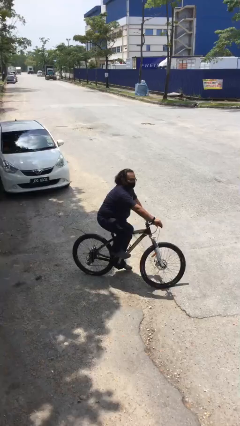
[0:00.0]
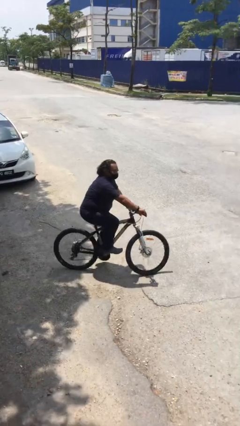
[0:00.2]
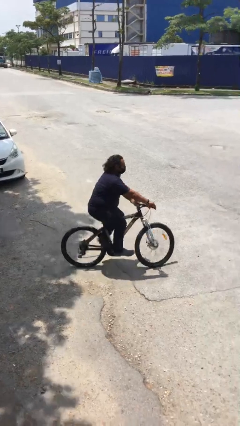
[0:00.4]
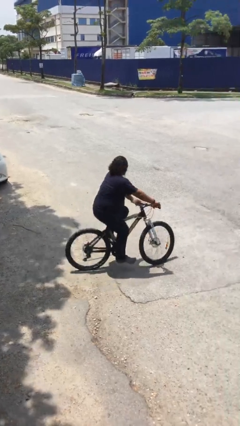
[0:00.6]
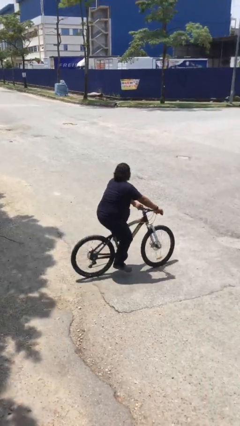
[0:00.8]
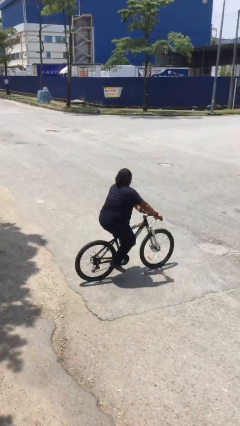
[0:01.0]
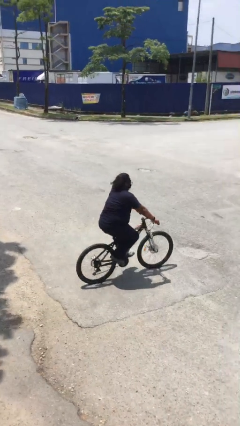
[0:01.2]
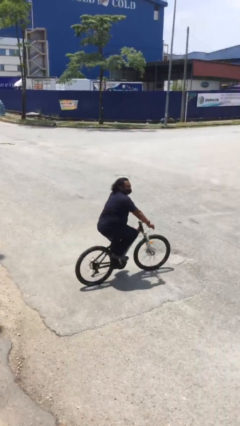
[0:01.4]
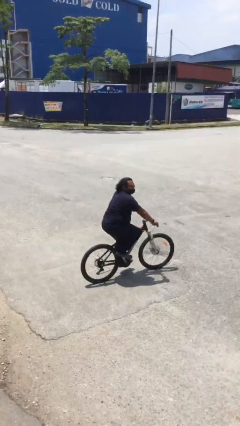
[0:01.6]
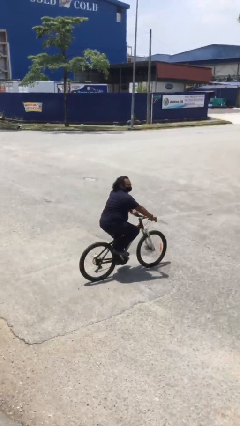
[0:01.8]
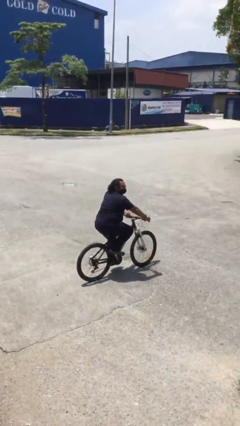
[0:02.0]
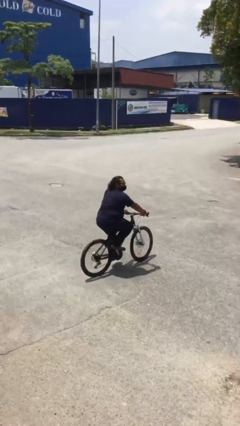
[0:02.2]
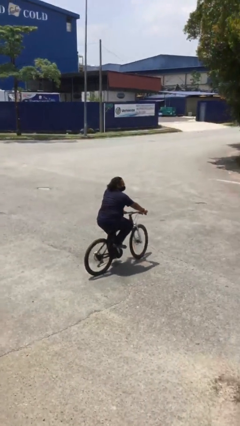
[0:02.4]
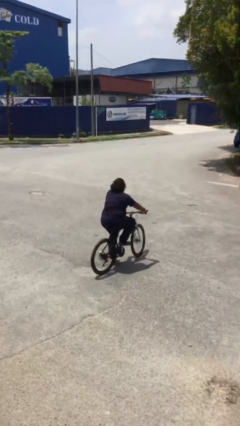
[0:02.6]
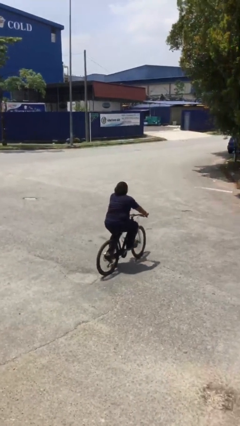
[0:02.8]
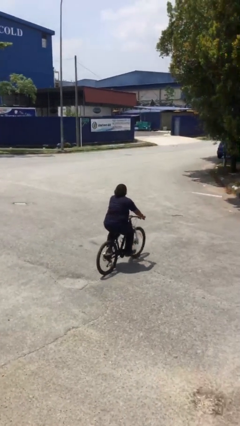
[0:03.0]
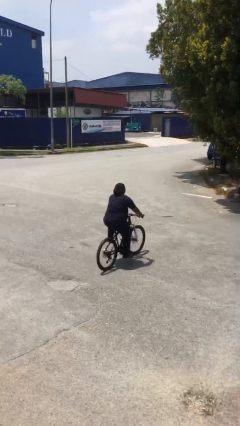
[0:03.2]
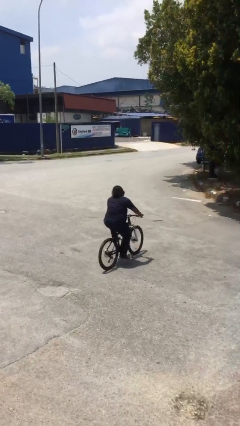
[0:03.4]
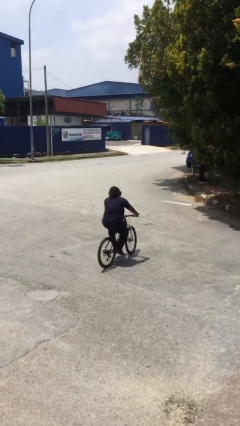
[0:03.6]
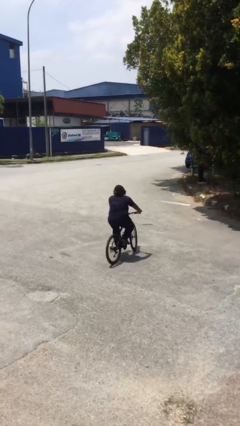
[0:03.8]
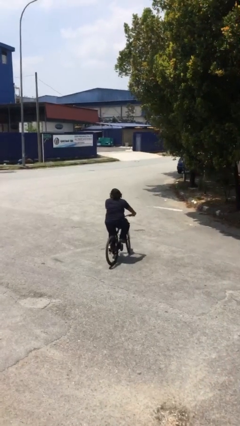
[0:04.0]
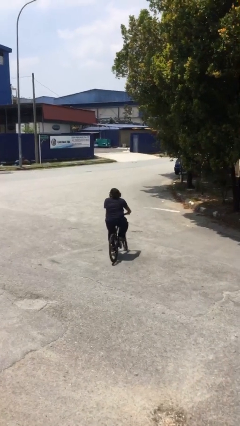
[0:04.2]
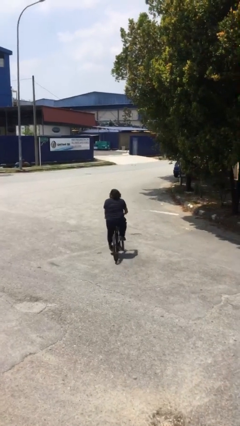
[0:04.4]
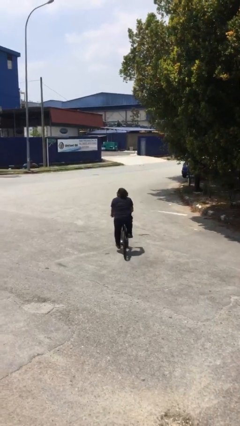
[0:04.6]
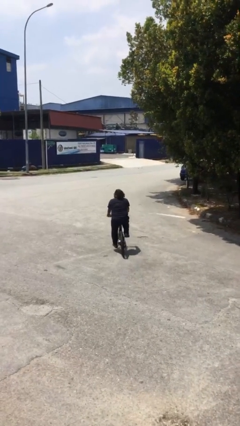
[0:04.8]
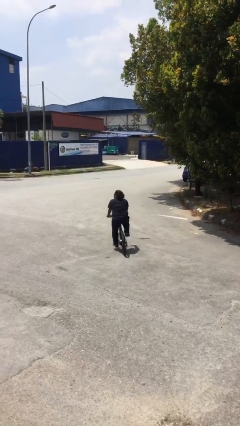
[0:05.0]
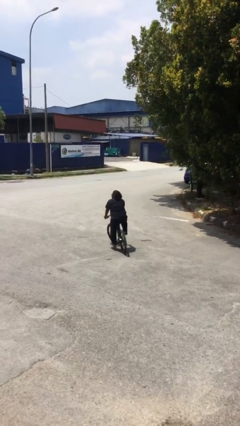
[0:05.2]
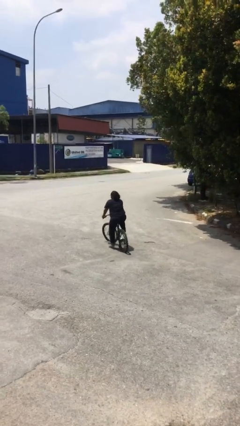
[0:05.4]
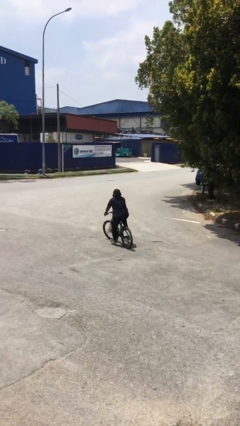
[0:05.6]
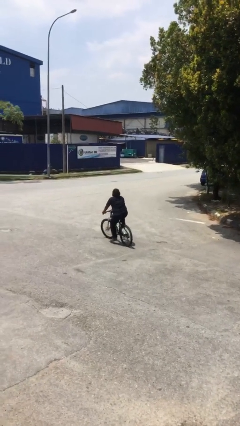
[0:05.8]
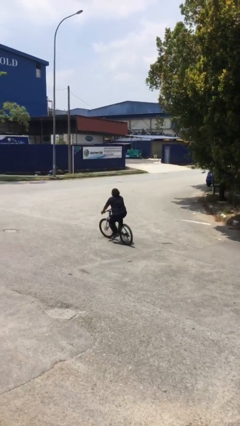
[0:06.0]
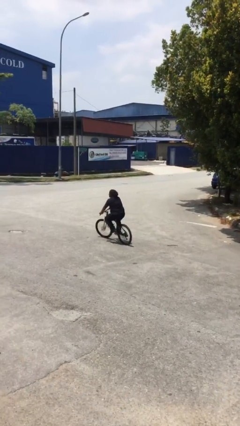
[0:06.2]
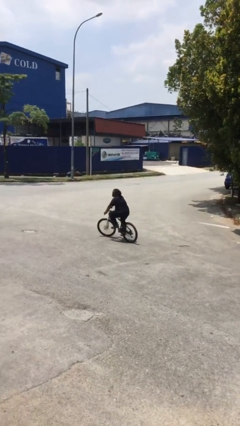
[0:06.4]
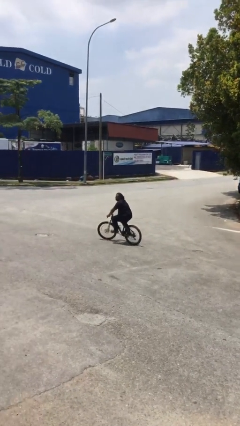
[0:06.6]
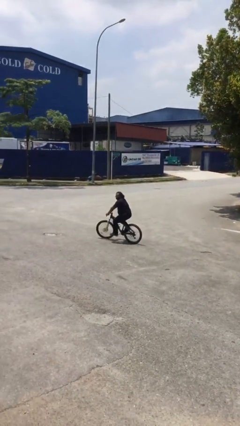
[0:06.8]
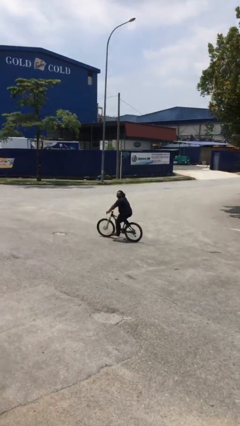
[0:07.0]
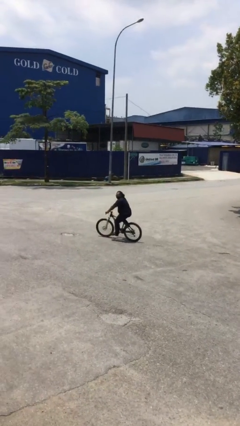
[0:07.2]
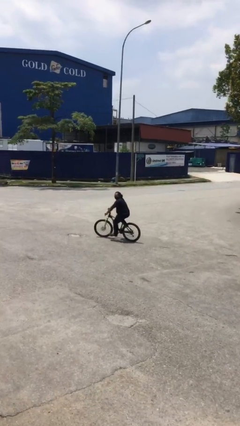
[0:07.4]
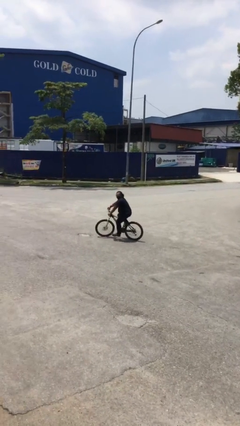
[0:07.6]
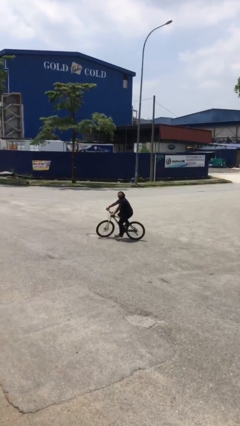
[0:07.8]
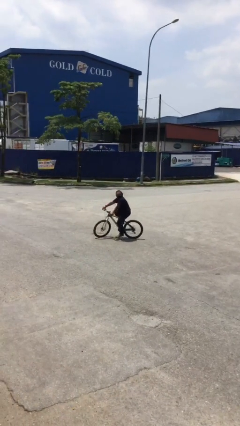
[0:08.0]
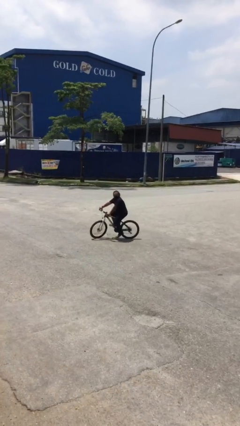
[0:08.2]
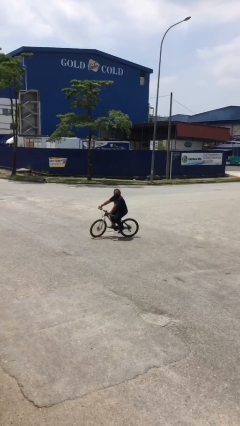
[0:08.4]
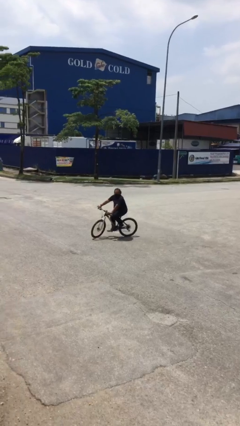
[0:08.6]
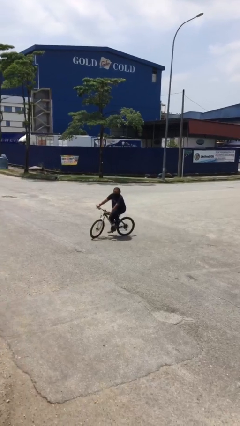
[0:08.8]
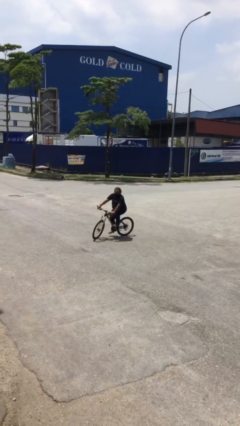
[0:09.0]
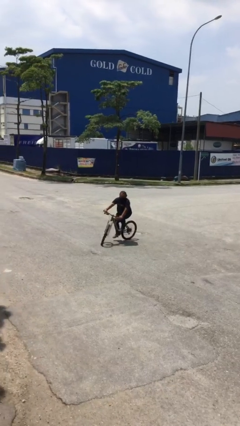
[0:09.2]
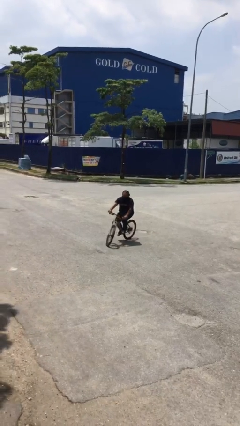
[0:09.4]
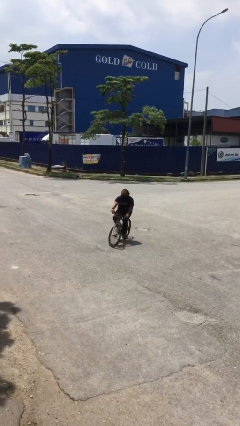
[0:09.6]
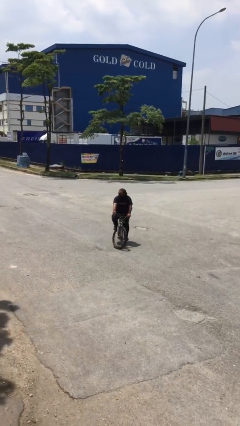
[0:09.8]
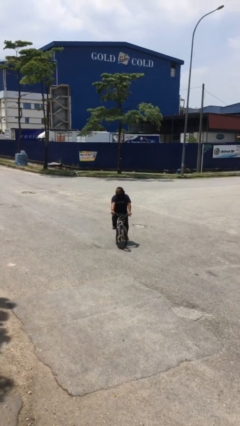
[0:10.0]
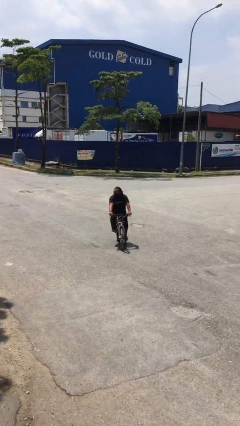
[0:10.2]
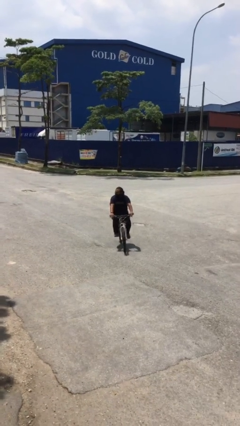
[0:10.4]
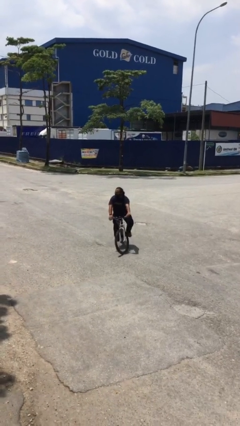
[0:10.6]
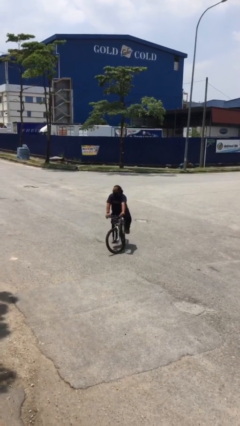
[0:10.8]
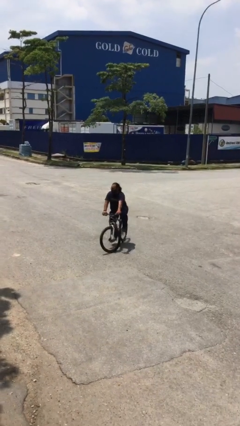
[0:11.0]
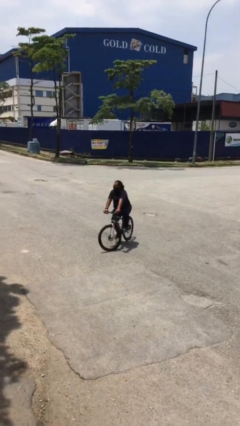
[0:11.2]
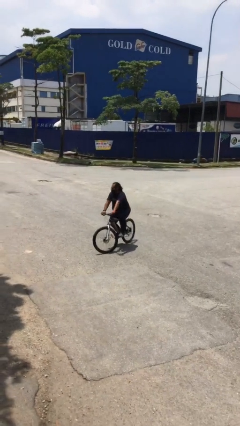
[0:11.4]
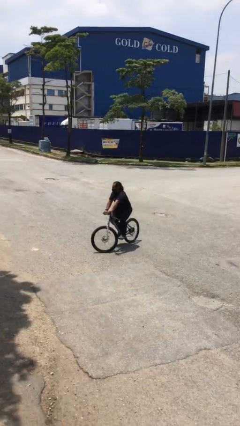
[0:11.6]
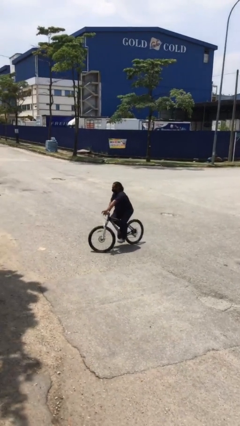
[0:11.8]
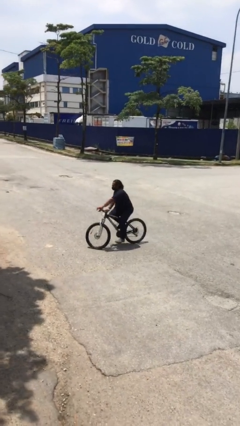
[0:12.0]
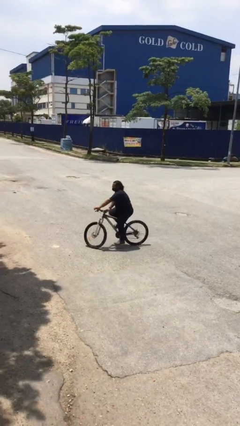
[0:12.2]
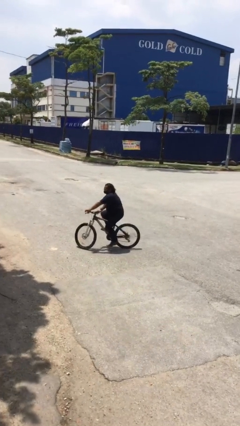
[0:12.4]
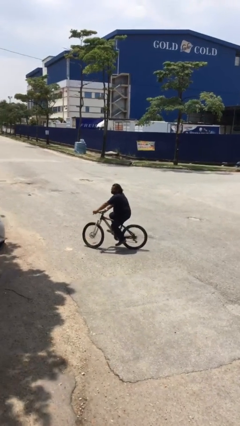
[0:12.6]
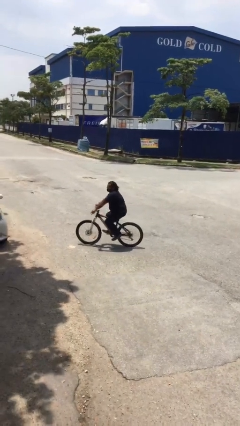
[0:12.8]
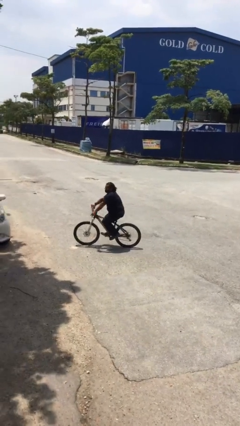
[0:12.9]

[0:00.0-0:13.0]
person rides bicycle

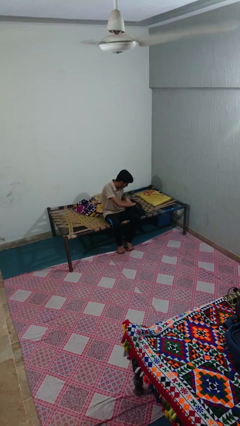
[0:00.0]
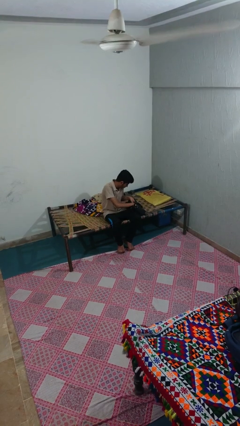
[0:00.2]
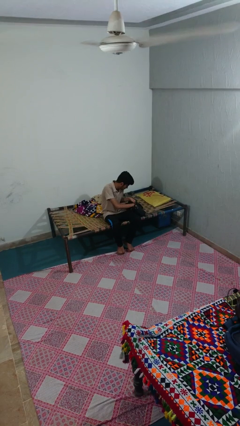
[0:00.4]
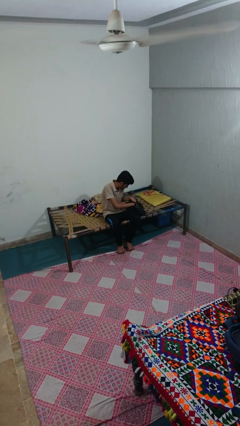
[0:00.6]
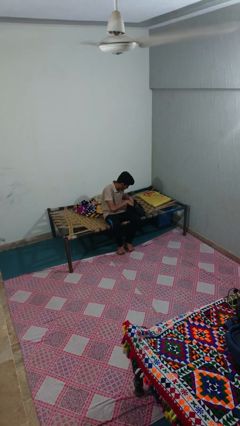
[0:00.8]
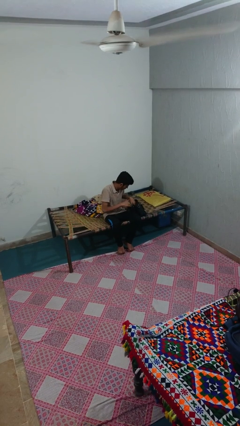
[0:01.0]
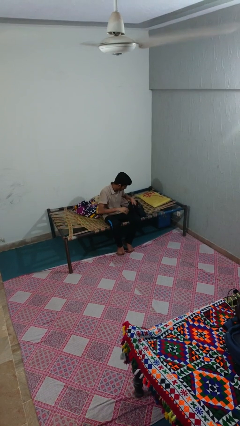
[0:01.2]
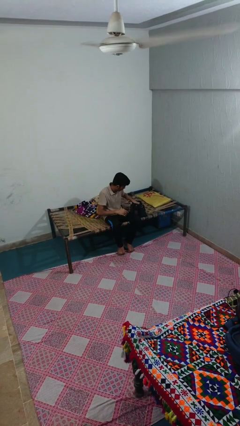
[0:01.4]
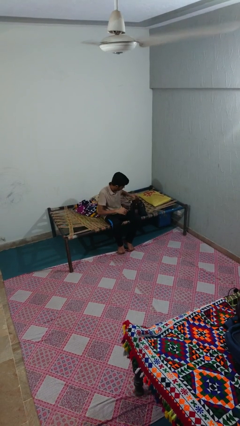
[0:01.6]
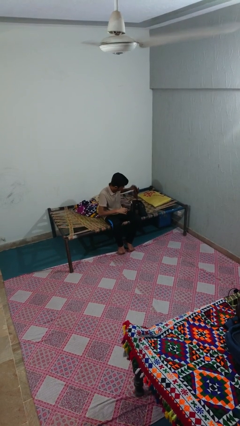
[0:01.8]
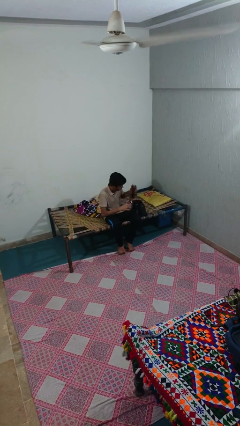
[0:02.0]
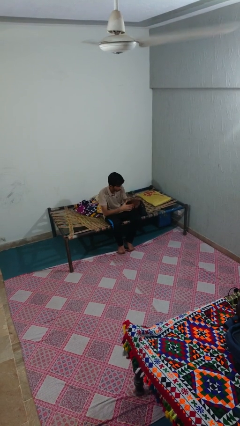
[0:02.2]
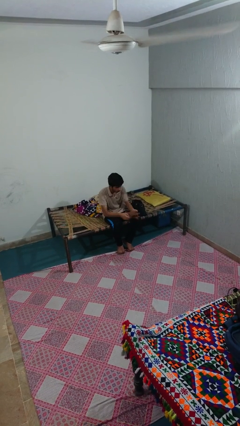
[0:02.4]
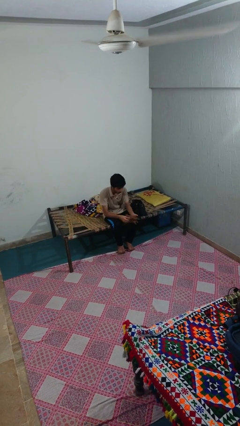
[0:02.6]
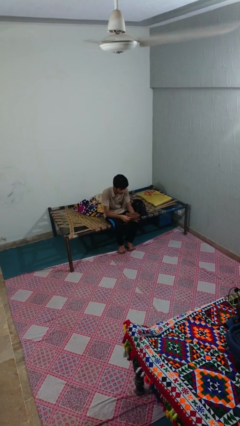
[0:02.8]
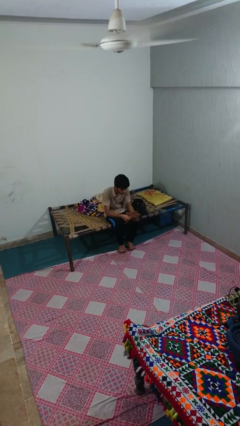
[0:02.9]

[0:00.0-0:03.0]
person takes object from purse

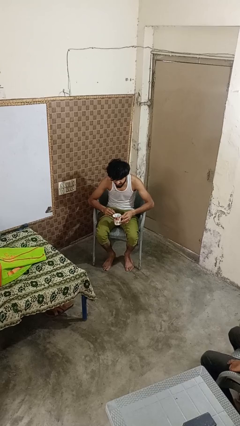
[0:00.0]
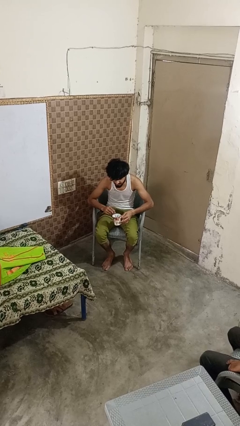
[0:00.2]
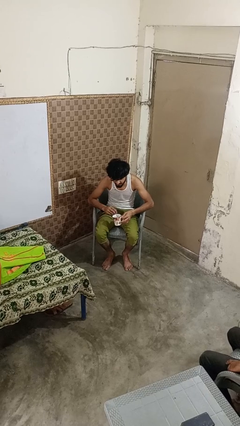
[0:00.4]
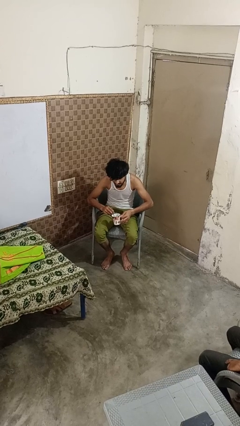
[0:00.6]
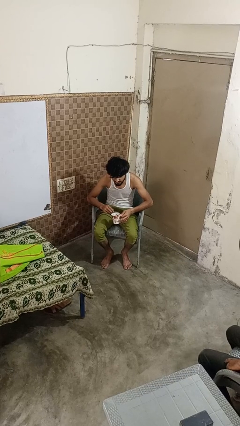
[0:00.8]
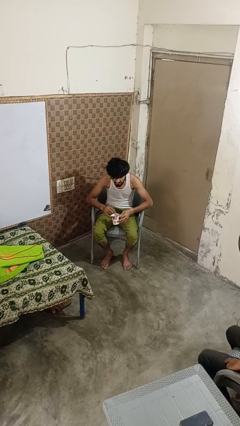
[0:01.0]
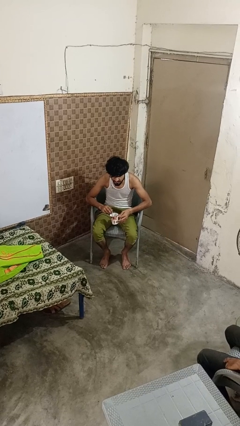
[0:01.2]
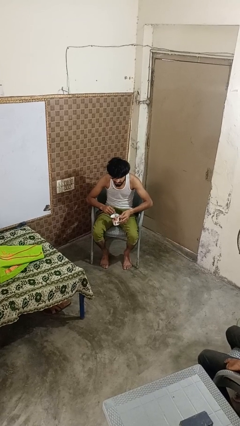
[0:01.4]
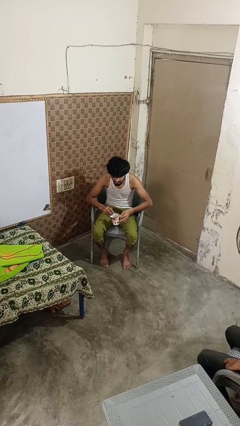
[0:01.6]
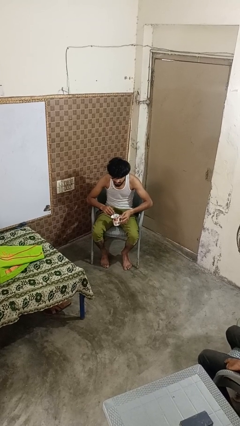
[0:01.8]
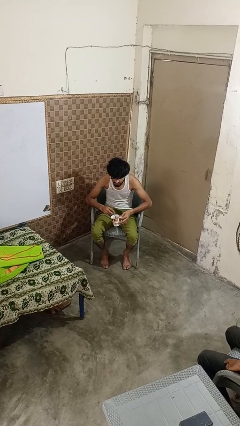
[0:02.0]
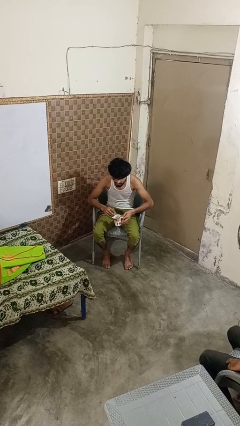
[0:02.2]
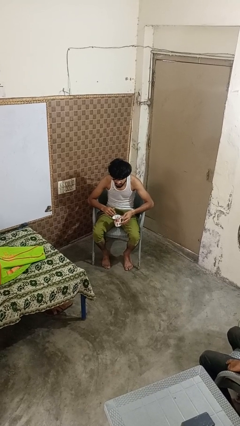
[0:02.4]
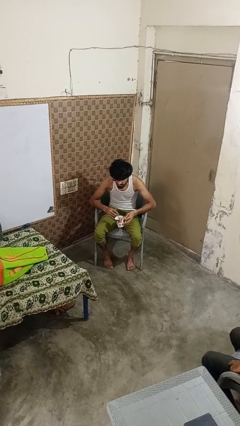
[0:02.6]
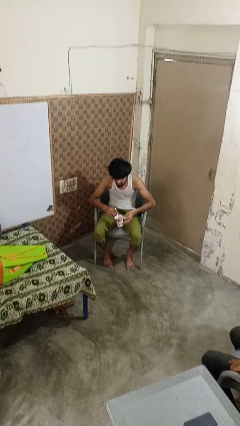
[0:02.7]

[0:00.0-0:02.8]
person stirs mug
